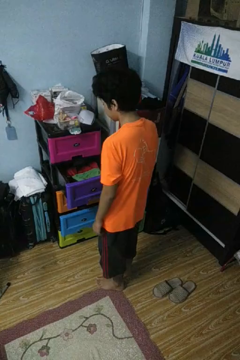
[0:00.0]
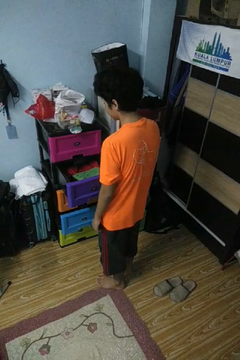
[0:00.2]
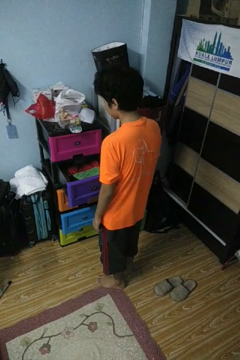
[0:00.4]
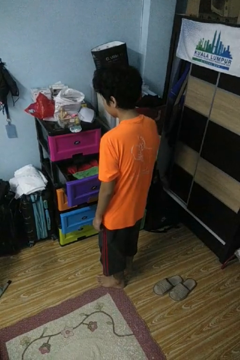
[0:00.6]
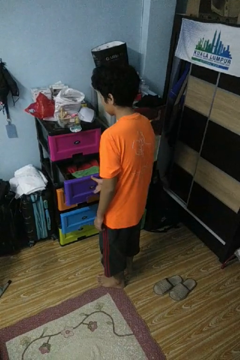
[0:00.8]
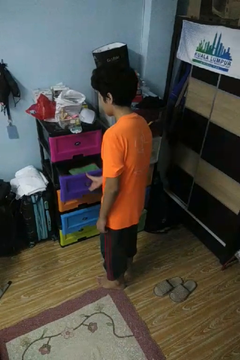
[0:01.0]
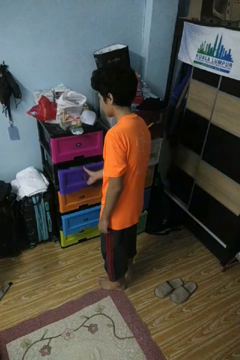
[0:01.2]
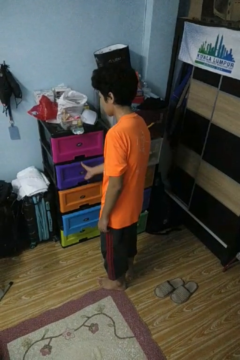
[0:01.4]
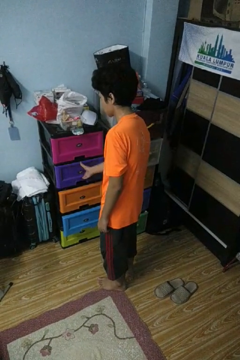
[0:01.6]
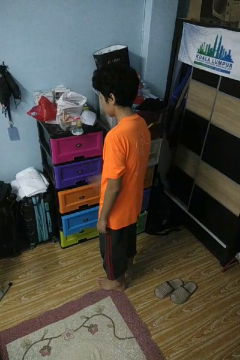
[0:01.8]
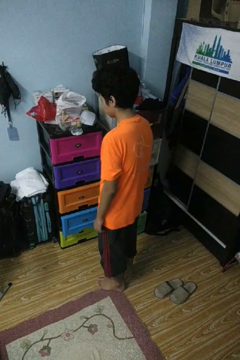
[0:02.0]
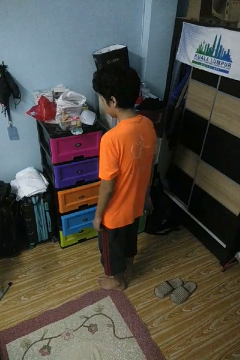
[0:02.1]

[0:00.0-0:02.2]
person closes dresser drawer

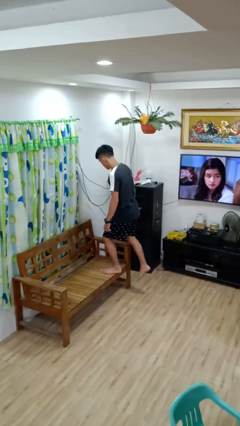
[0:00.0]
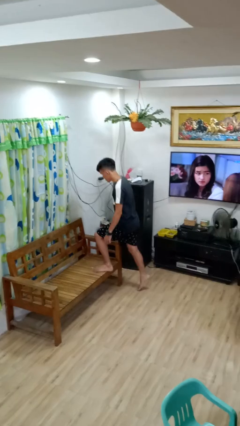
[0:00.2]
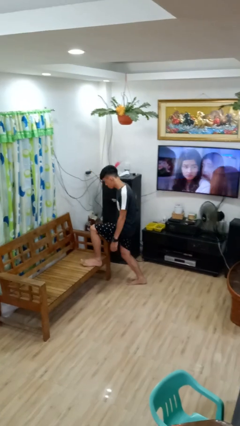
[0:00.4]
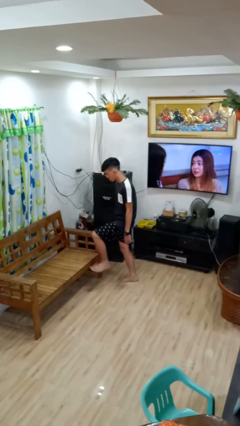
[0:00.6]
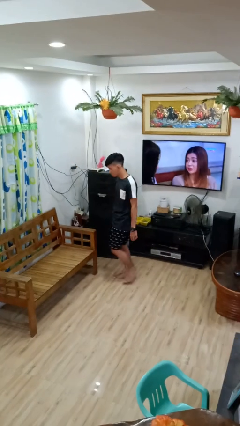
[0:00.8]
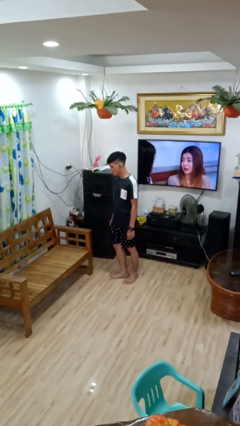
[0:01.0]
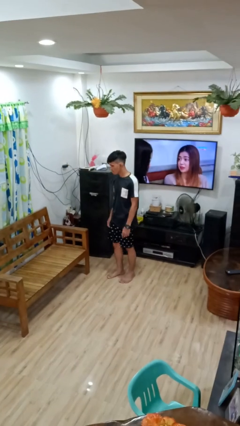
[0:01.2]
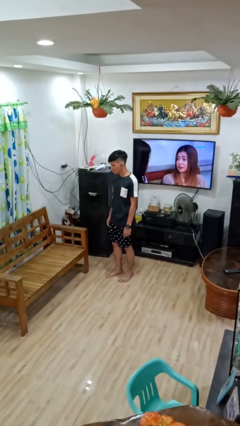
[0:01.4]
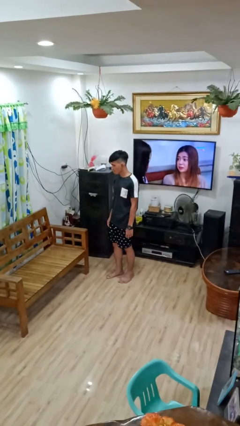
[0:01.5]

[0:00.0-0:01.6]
person climbs off couch

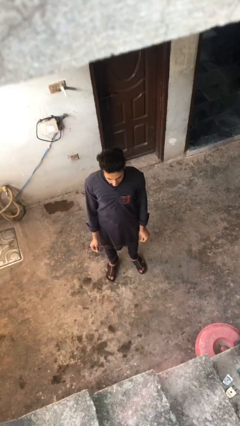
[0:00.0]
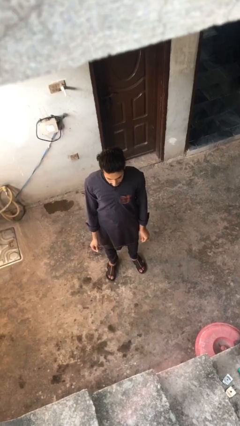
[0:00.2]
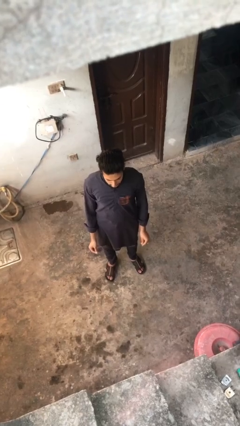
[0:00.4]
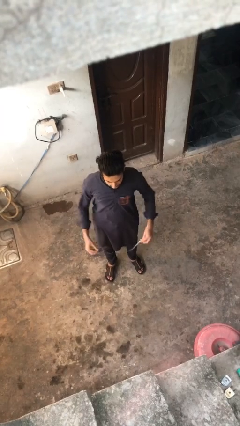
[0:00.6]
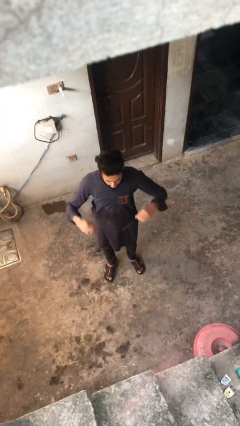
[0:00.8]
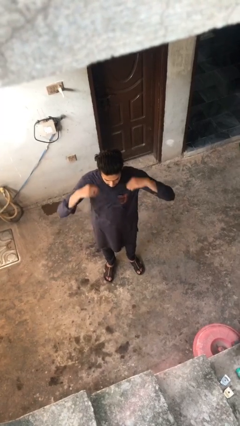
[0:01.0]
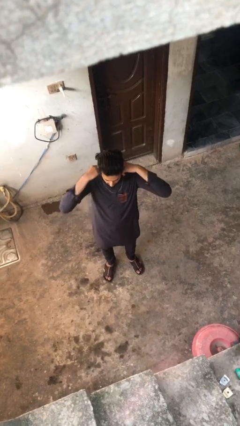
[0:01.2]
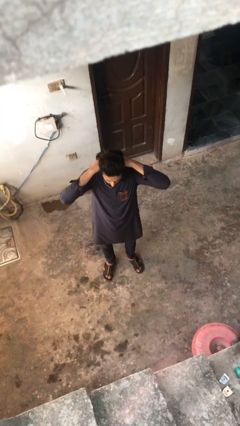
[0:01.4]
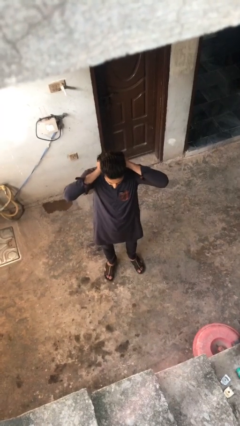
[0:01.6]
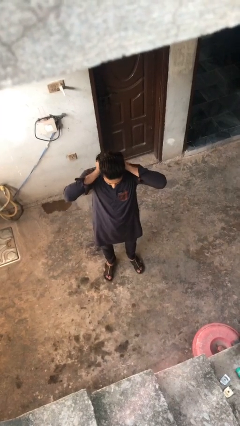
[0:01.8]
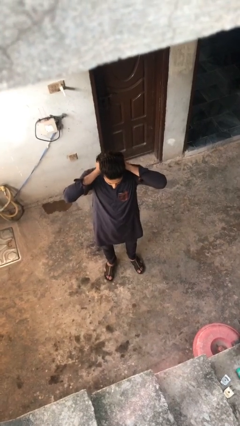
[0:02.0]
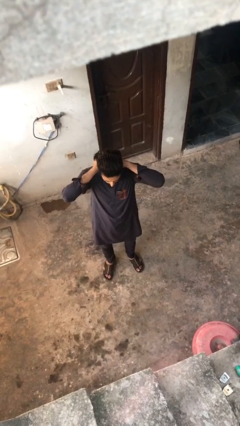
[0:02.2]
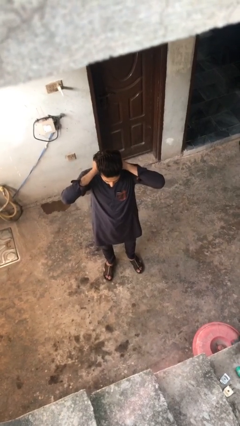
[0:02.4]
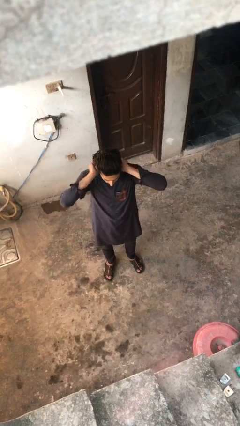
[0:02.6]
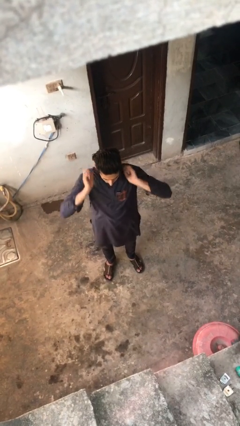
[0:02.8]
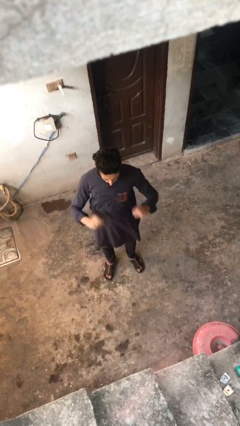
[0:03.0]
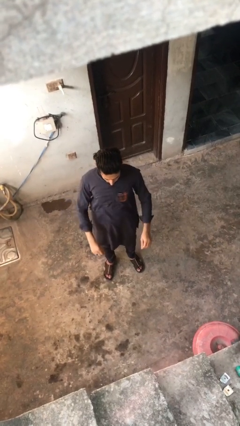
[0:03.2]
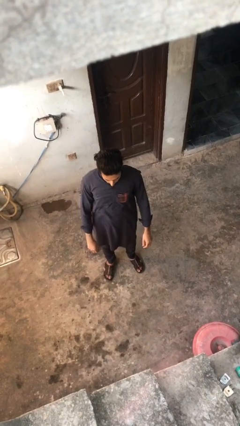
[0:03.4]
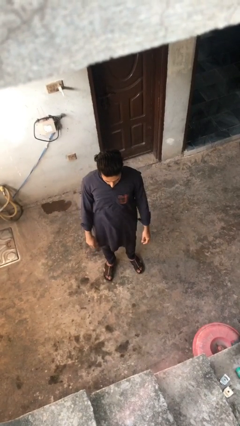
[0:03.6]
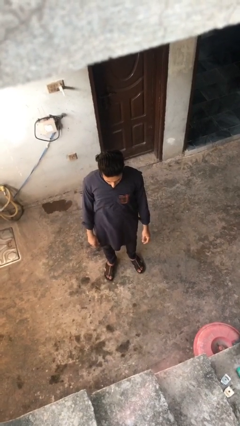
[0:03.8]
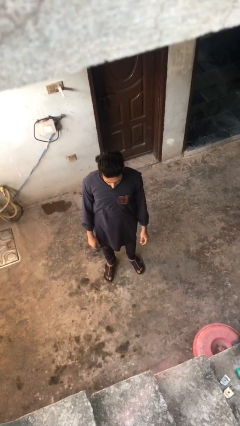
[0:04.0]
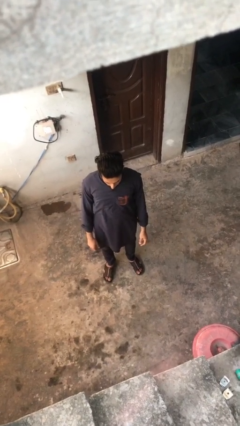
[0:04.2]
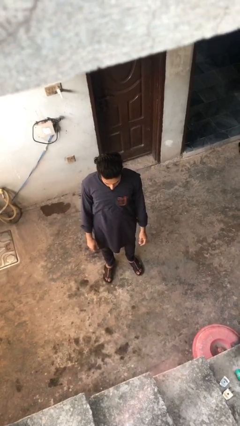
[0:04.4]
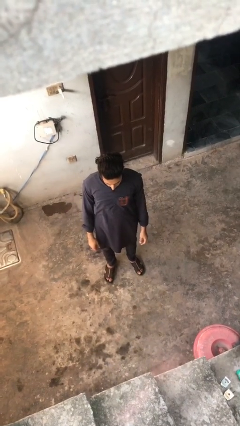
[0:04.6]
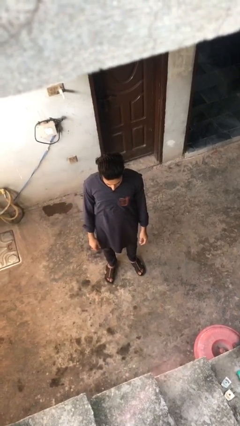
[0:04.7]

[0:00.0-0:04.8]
person puts on necklace

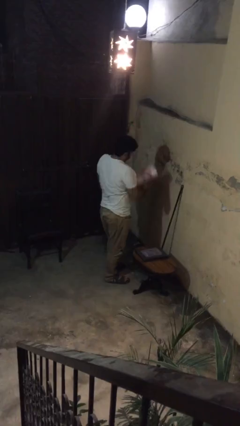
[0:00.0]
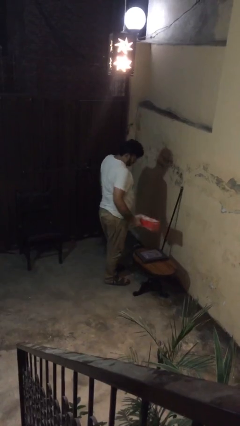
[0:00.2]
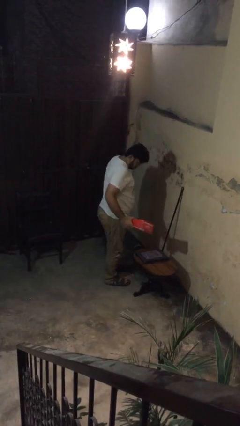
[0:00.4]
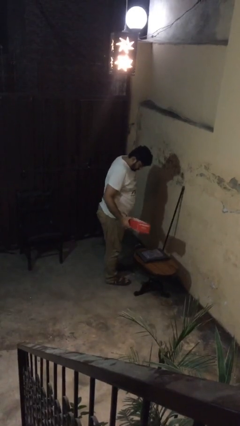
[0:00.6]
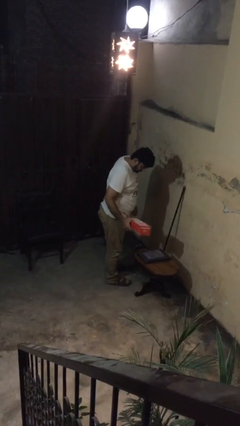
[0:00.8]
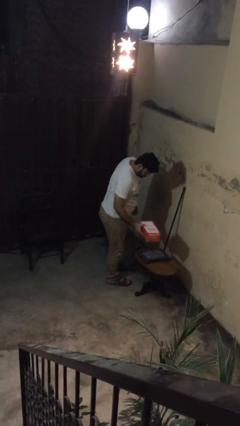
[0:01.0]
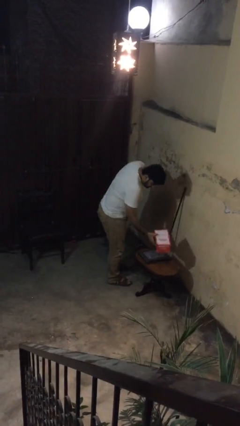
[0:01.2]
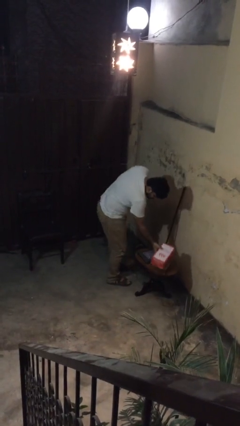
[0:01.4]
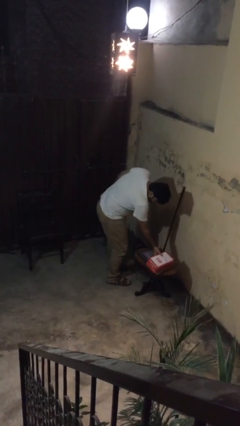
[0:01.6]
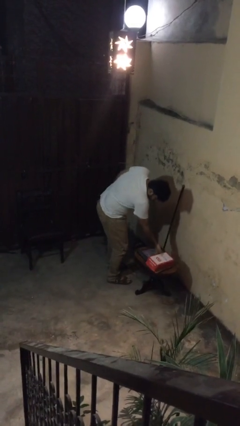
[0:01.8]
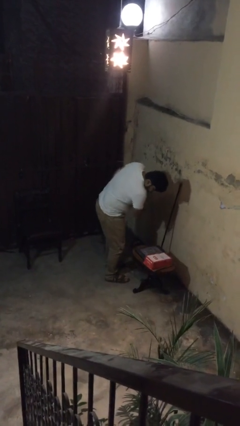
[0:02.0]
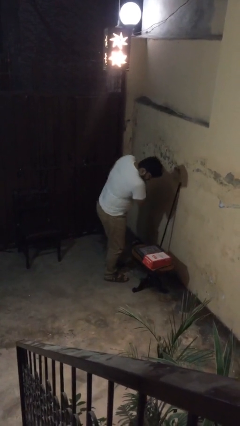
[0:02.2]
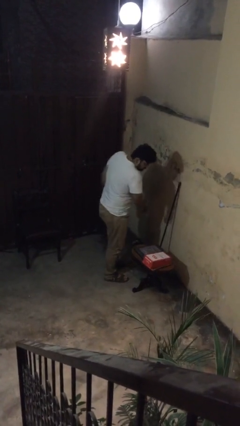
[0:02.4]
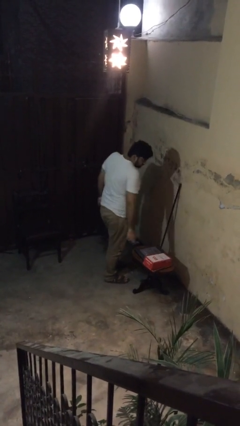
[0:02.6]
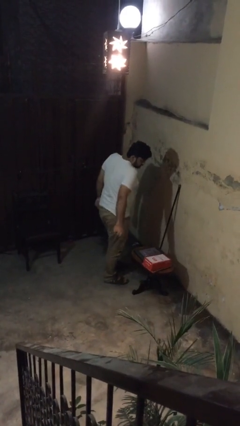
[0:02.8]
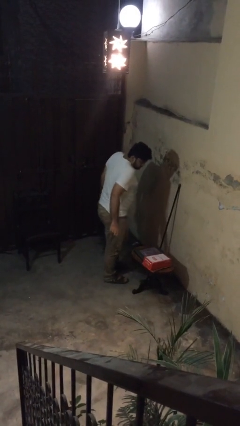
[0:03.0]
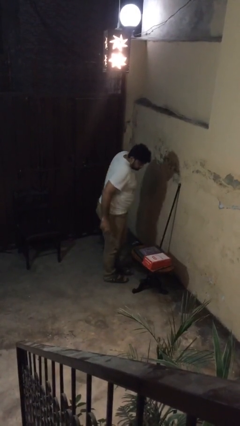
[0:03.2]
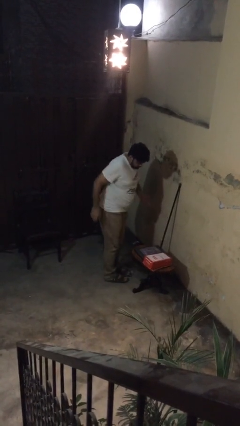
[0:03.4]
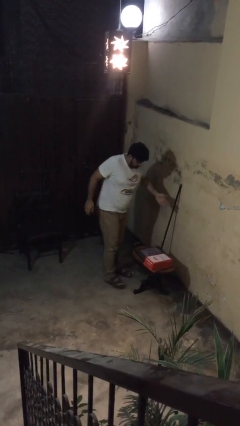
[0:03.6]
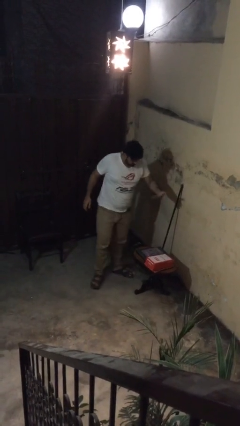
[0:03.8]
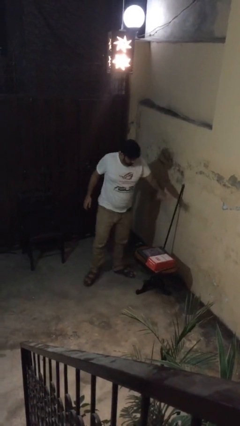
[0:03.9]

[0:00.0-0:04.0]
person puts down object on table

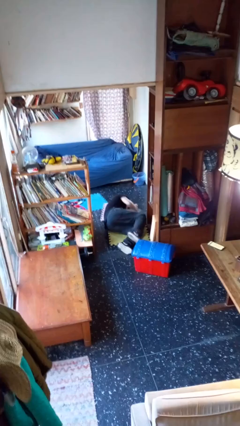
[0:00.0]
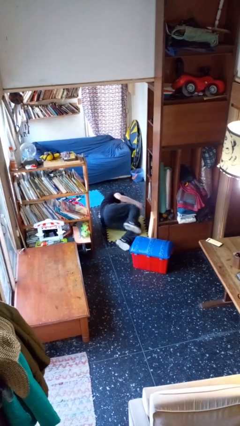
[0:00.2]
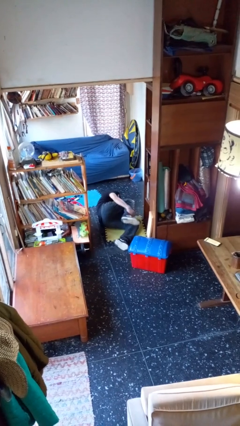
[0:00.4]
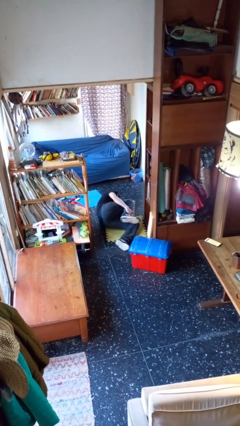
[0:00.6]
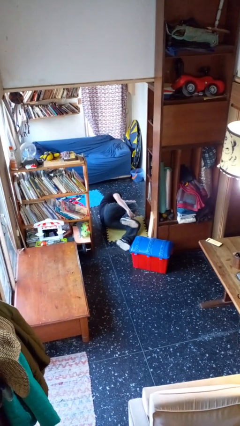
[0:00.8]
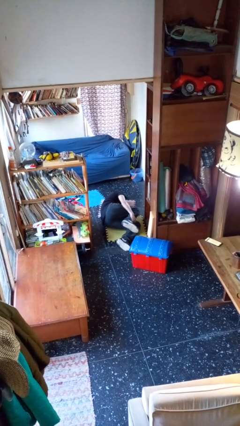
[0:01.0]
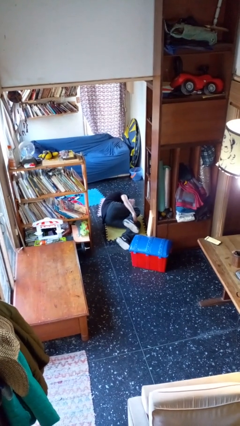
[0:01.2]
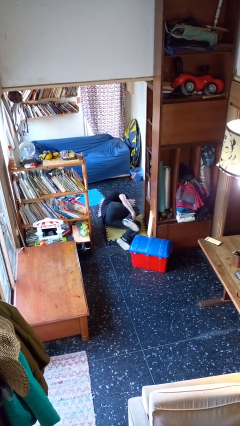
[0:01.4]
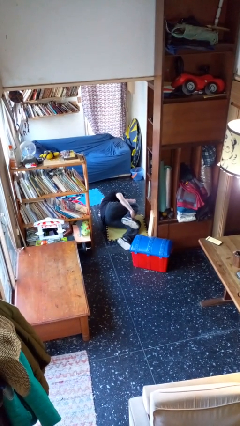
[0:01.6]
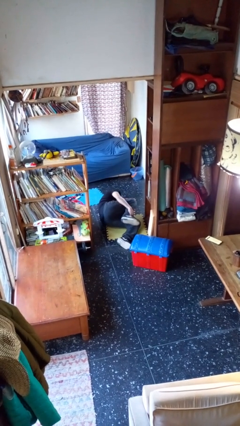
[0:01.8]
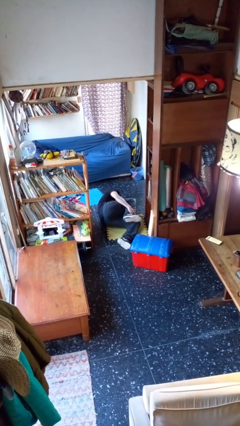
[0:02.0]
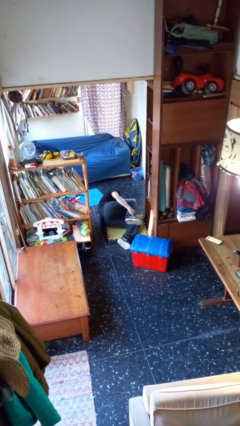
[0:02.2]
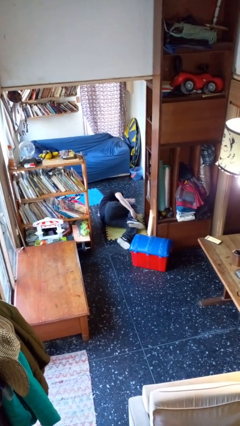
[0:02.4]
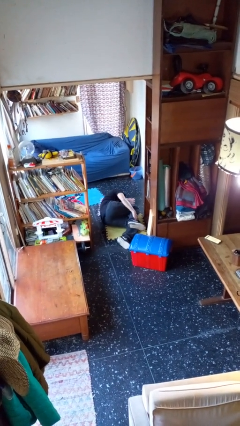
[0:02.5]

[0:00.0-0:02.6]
person lies down on floor

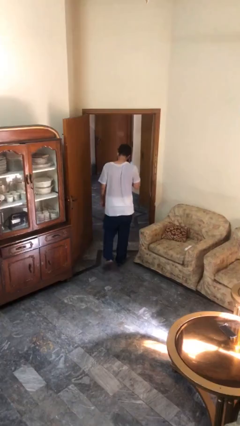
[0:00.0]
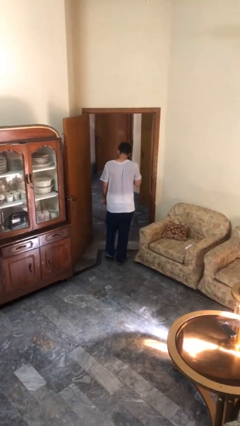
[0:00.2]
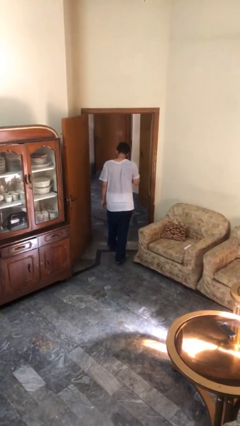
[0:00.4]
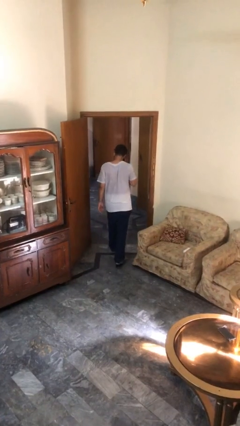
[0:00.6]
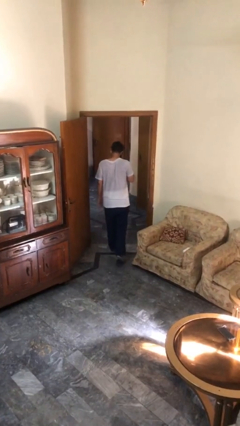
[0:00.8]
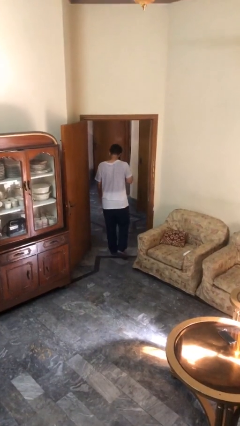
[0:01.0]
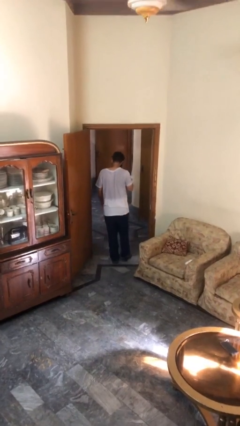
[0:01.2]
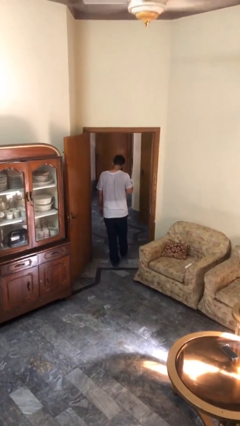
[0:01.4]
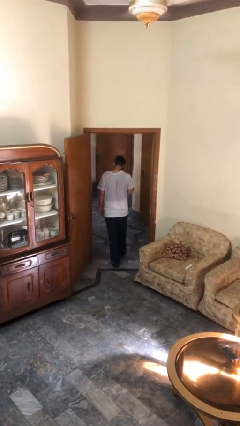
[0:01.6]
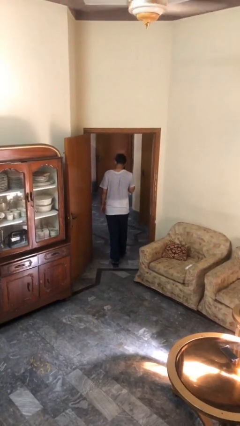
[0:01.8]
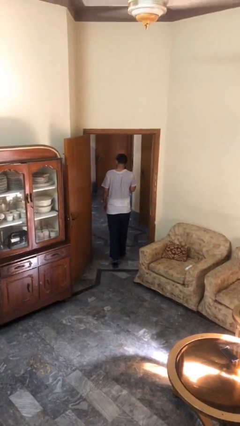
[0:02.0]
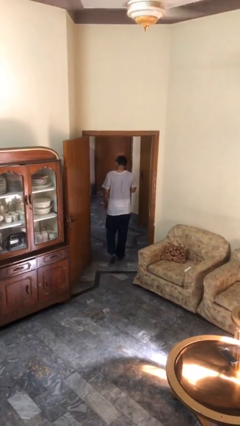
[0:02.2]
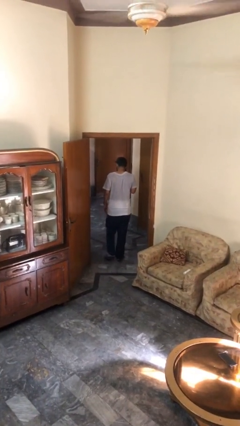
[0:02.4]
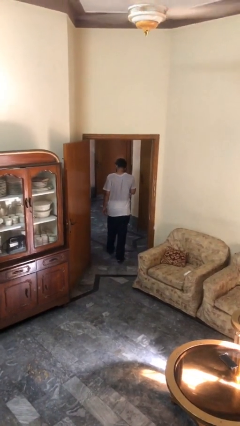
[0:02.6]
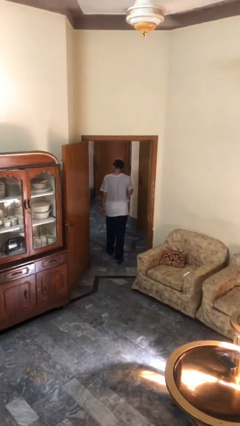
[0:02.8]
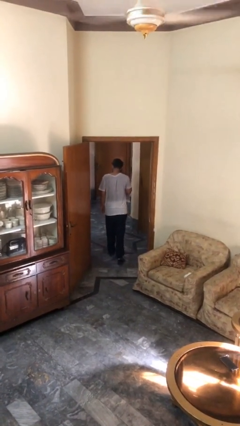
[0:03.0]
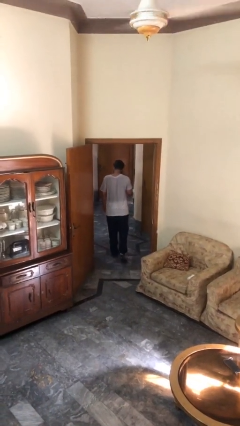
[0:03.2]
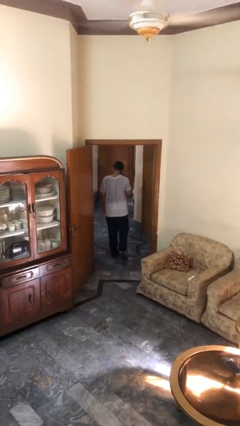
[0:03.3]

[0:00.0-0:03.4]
person exits scene through structure
